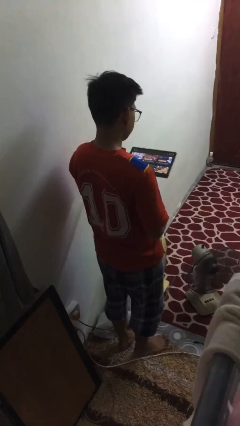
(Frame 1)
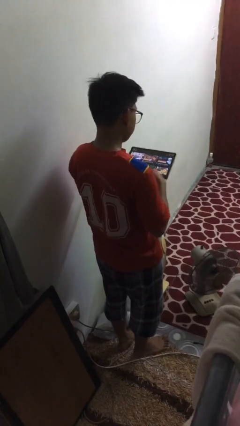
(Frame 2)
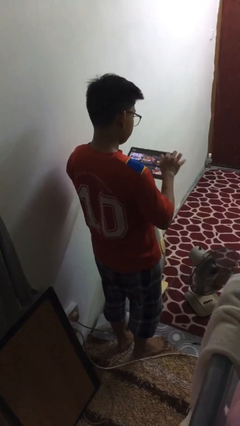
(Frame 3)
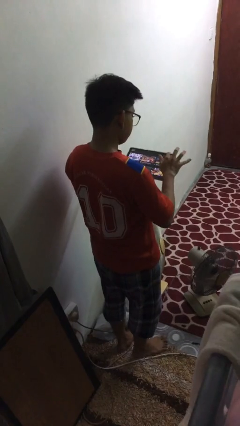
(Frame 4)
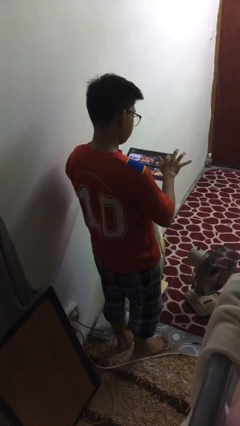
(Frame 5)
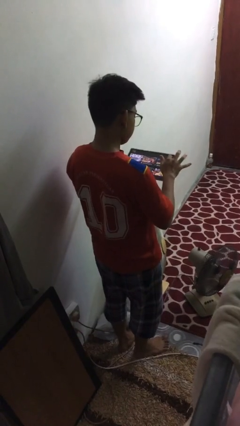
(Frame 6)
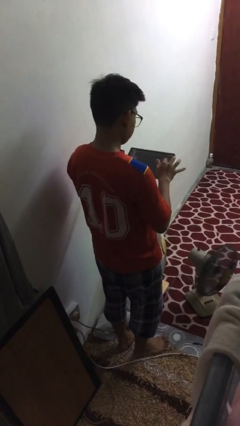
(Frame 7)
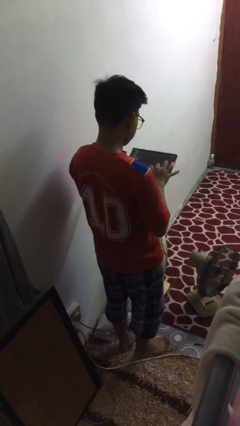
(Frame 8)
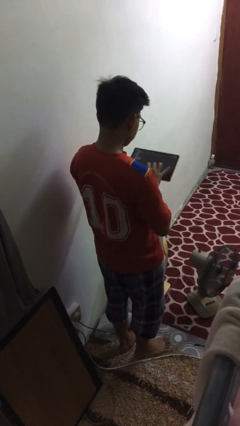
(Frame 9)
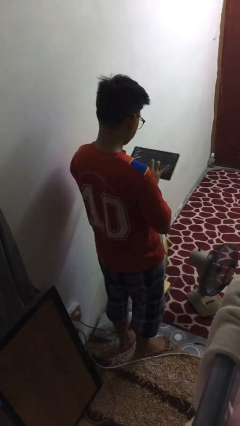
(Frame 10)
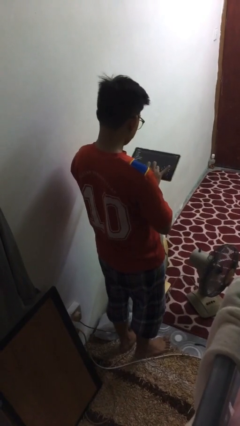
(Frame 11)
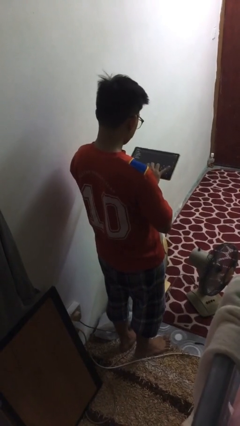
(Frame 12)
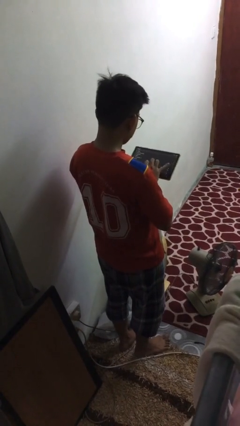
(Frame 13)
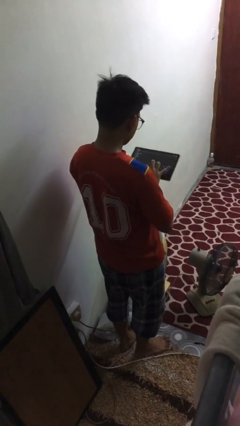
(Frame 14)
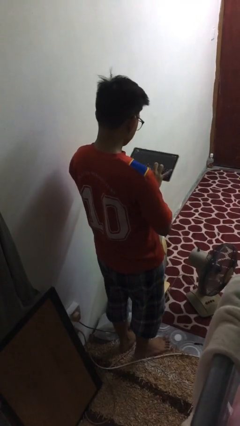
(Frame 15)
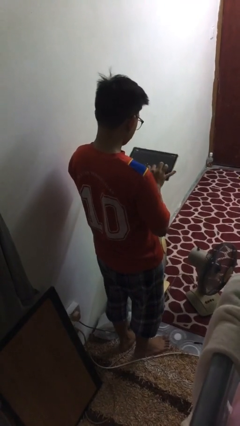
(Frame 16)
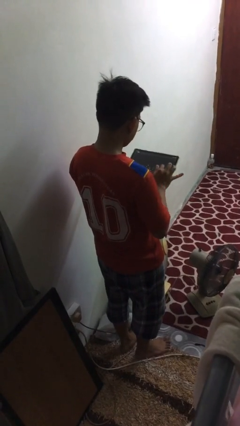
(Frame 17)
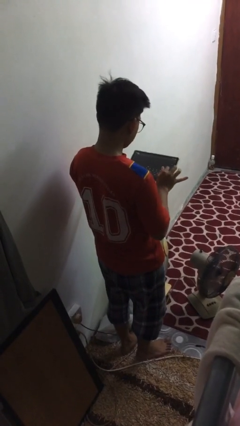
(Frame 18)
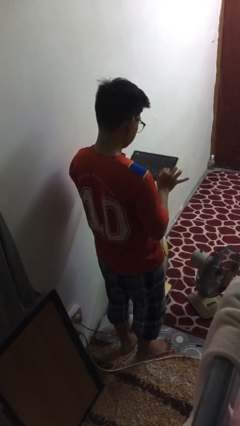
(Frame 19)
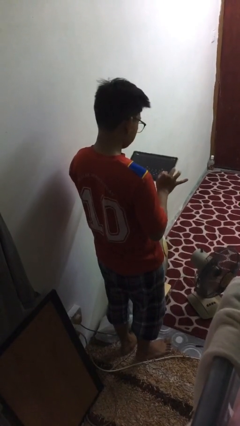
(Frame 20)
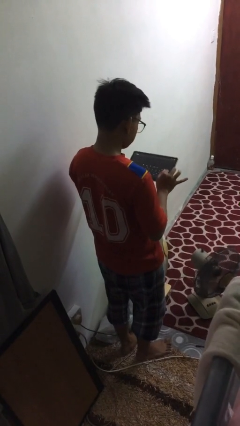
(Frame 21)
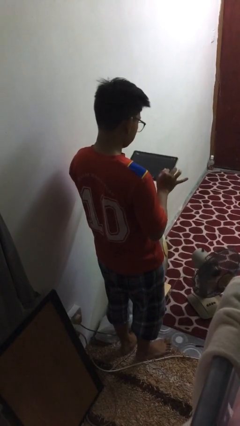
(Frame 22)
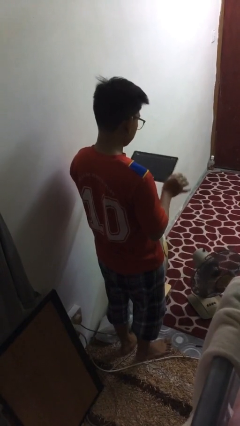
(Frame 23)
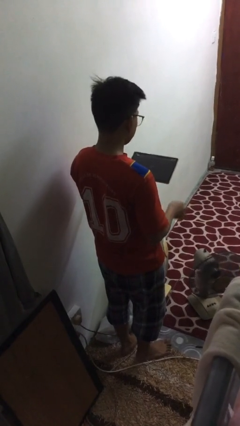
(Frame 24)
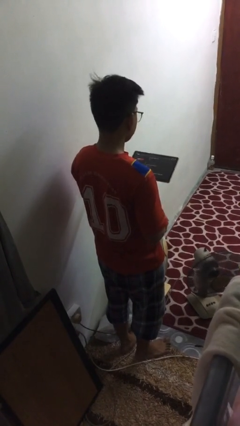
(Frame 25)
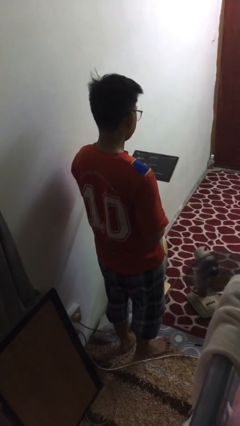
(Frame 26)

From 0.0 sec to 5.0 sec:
person interacts with tablet

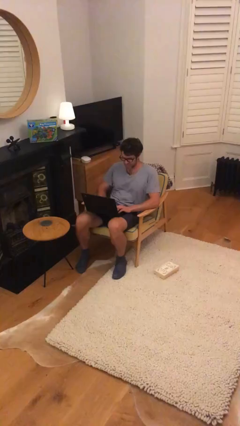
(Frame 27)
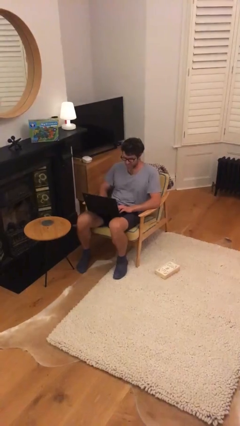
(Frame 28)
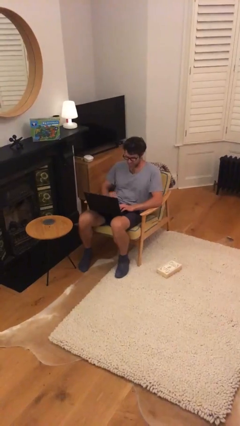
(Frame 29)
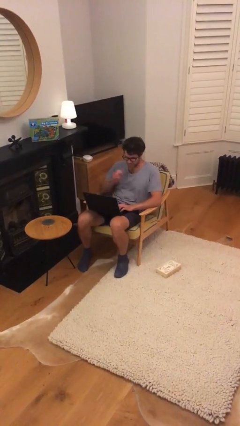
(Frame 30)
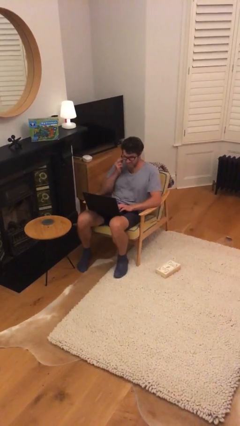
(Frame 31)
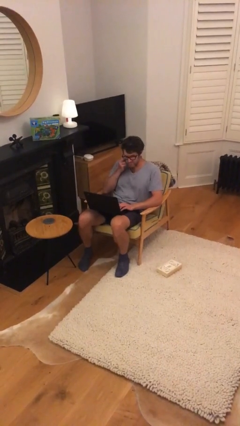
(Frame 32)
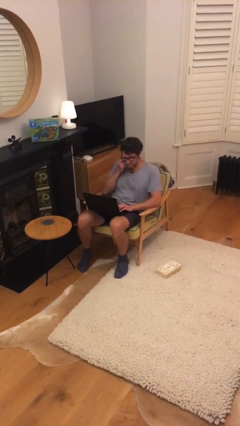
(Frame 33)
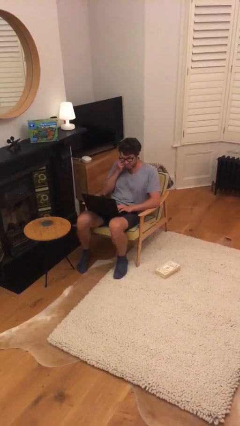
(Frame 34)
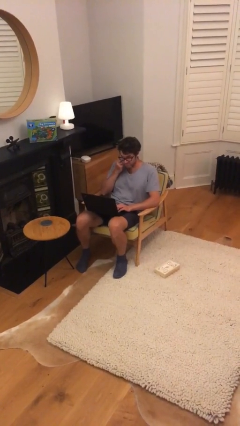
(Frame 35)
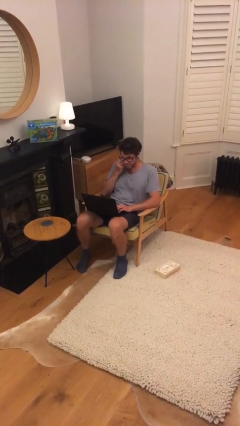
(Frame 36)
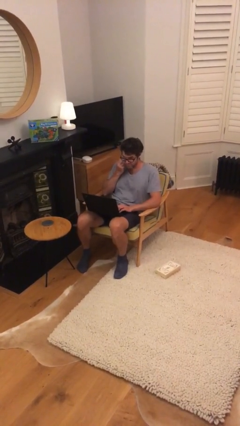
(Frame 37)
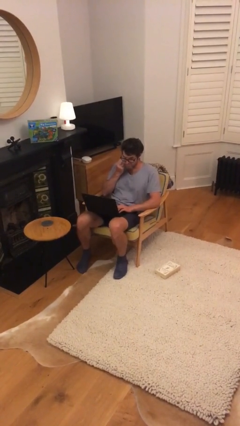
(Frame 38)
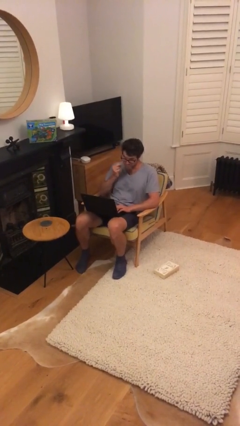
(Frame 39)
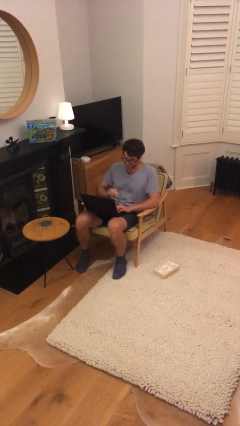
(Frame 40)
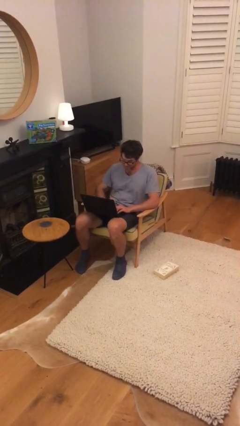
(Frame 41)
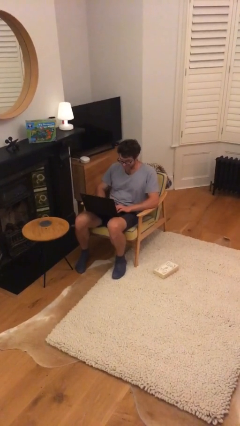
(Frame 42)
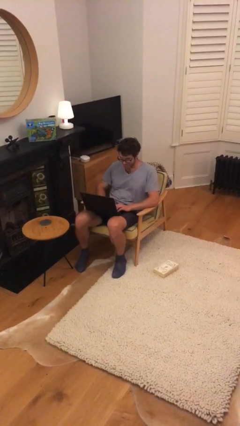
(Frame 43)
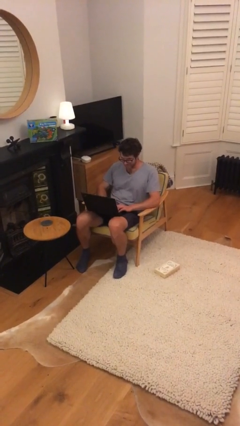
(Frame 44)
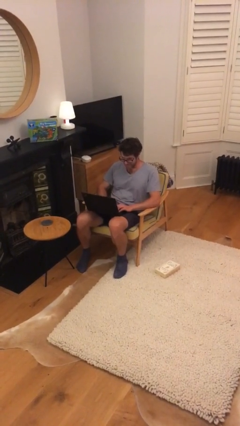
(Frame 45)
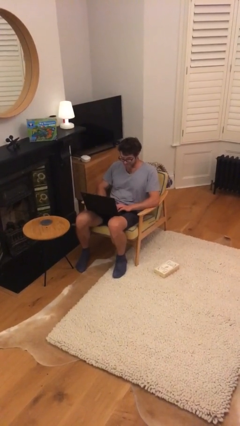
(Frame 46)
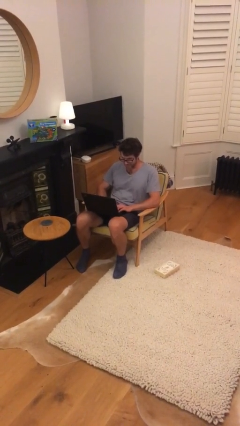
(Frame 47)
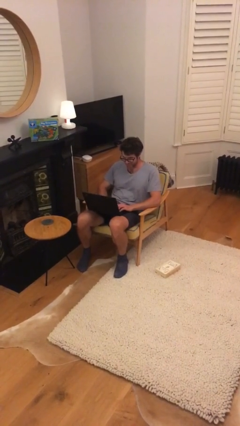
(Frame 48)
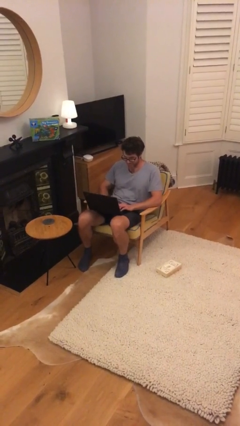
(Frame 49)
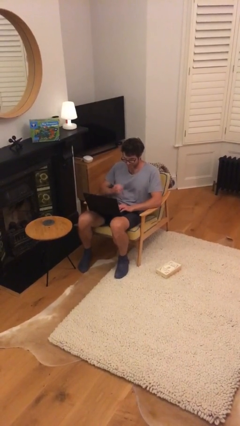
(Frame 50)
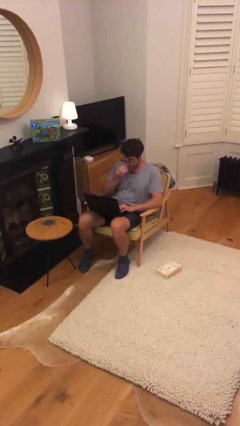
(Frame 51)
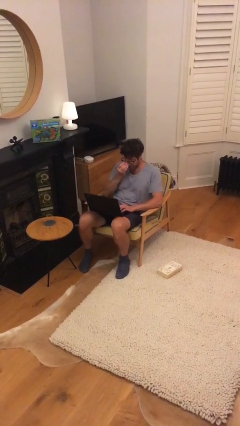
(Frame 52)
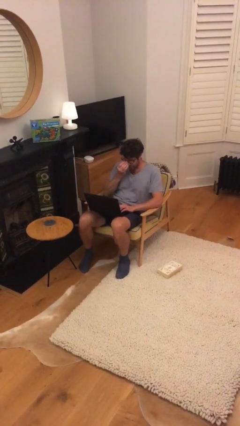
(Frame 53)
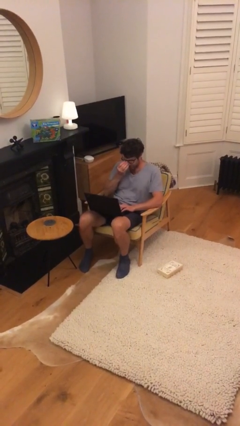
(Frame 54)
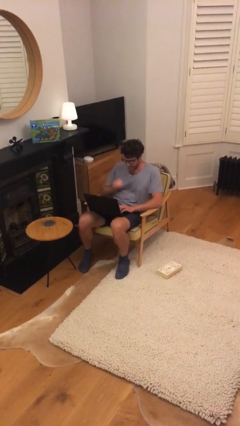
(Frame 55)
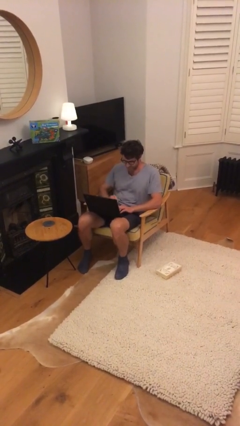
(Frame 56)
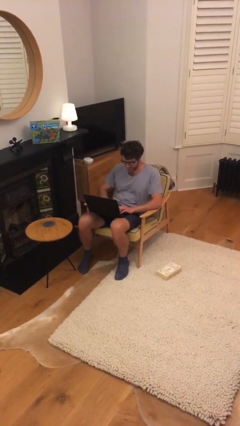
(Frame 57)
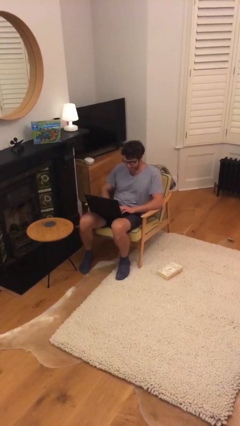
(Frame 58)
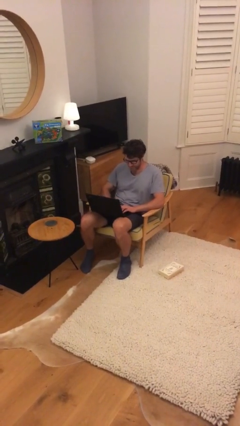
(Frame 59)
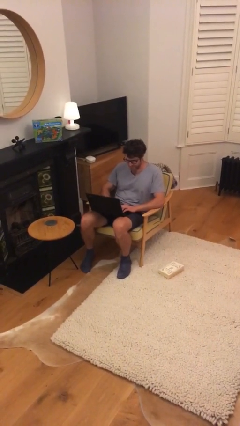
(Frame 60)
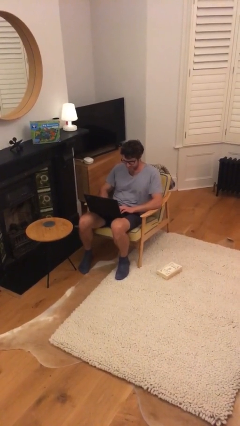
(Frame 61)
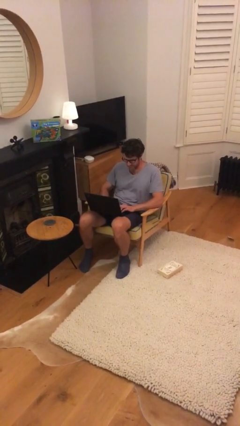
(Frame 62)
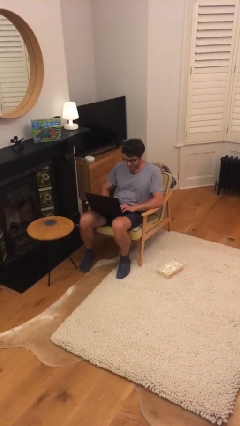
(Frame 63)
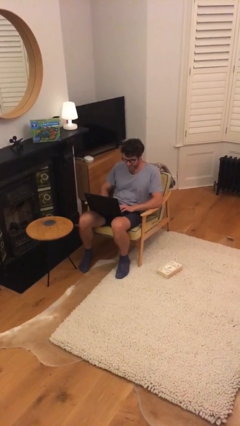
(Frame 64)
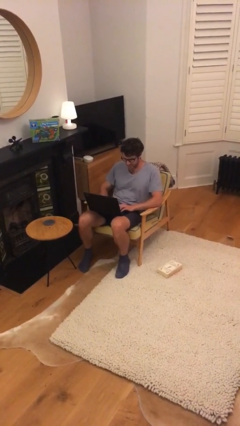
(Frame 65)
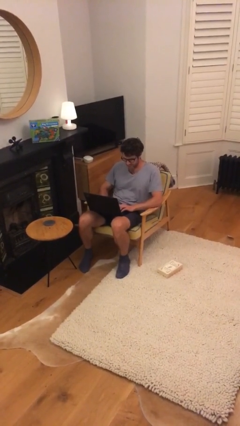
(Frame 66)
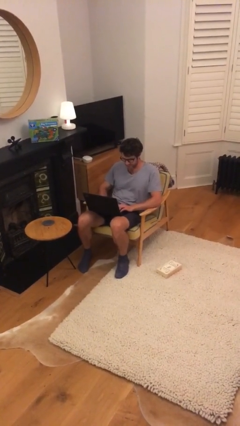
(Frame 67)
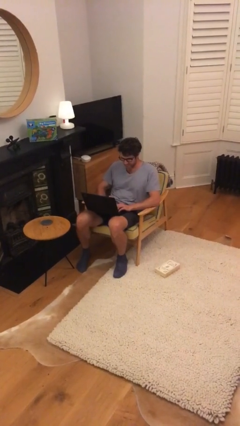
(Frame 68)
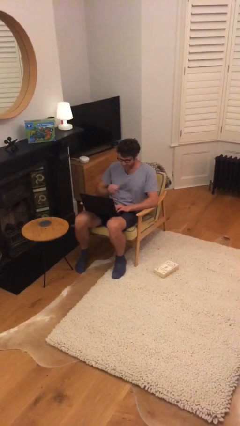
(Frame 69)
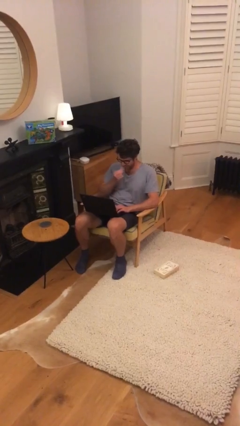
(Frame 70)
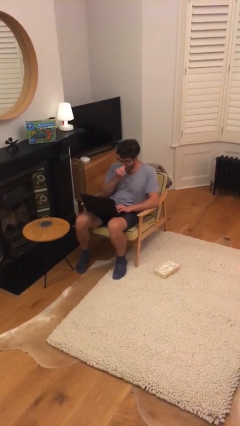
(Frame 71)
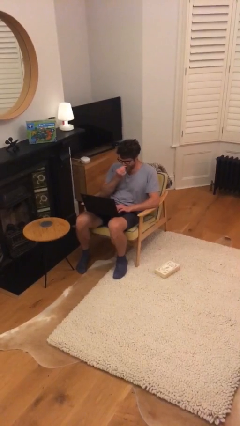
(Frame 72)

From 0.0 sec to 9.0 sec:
person interacts with laptop

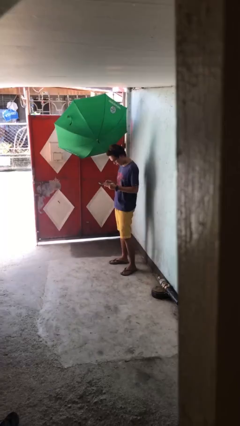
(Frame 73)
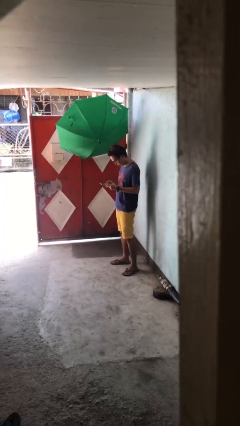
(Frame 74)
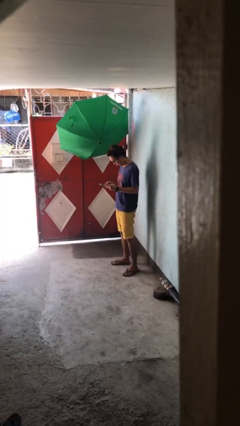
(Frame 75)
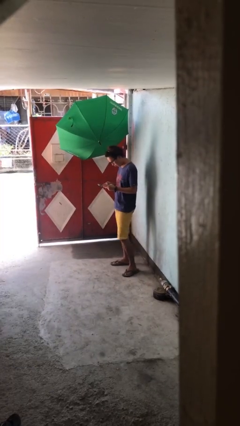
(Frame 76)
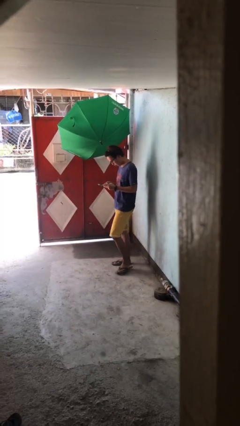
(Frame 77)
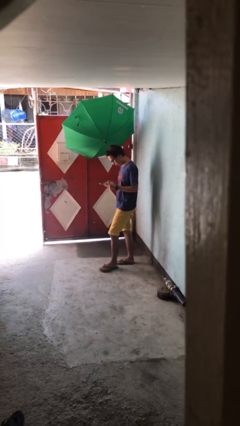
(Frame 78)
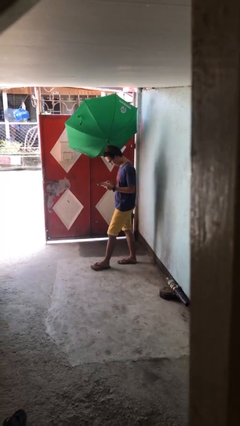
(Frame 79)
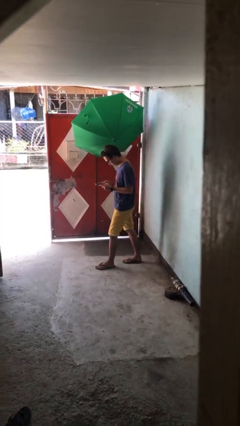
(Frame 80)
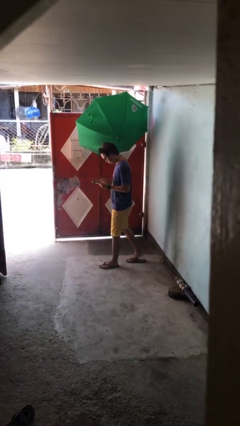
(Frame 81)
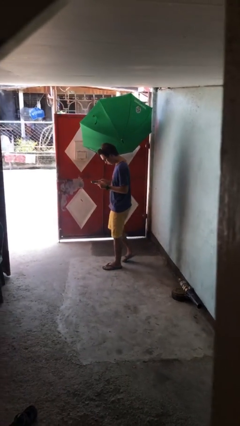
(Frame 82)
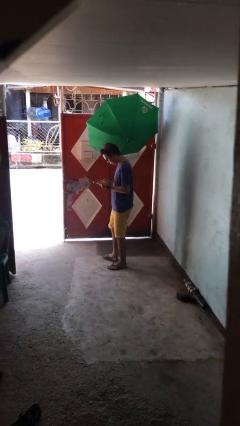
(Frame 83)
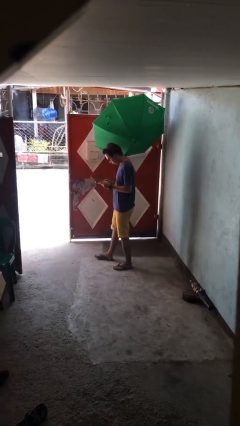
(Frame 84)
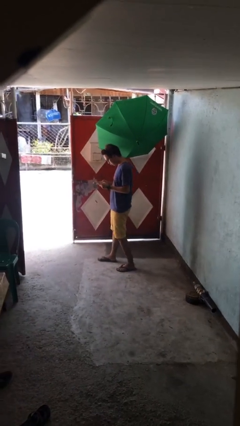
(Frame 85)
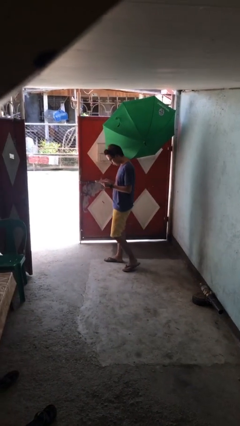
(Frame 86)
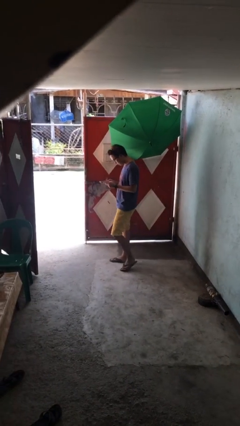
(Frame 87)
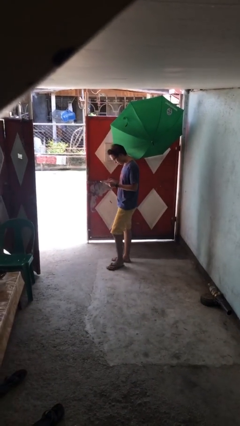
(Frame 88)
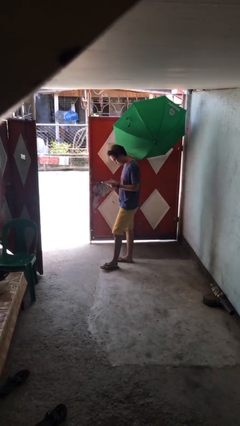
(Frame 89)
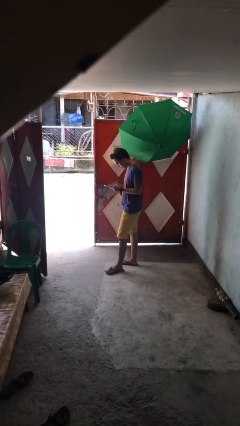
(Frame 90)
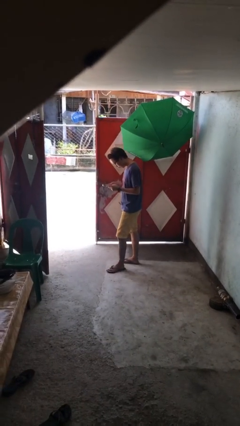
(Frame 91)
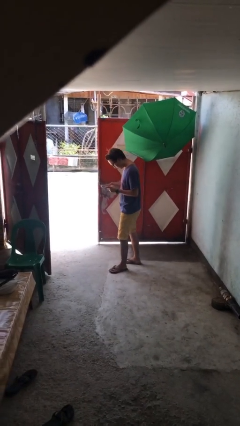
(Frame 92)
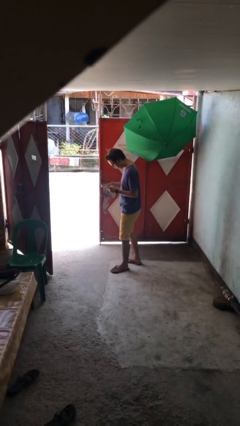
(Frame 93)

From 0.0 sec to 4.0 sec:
person texts on phone
